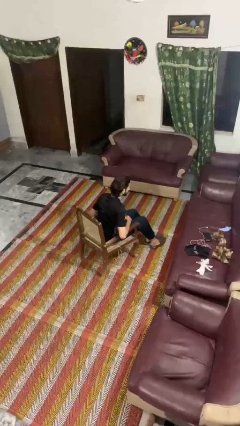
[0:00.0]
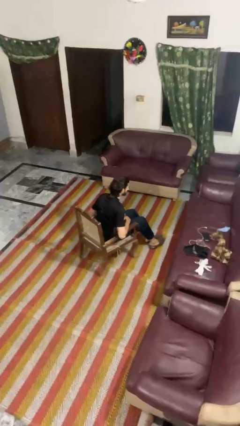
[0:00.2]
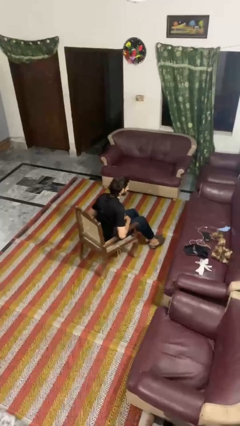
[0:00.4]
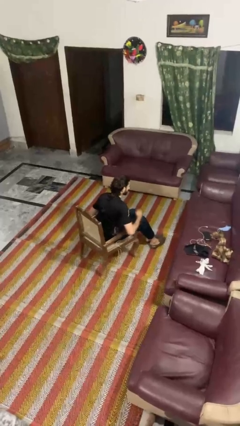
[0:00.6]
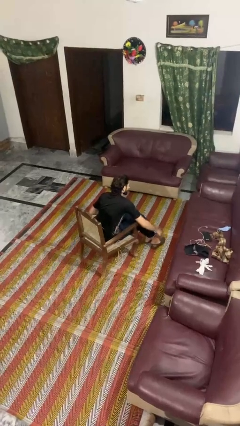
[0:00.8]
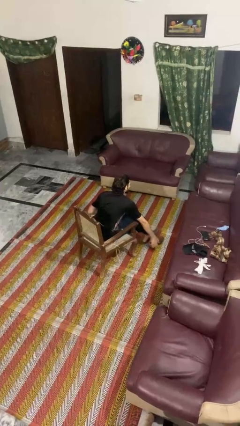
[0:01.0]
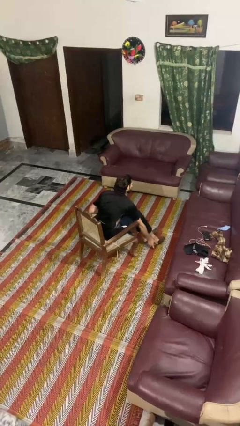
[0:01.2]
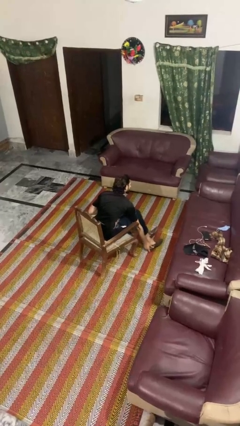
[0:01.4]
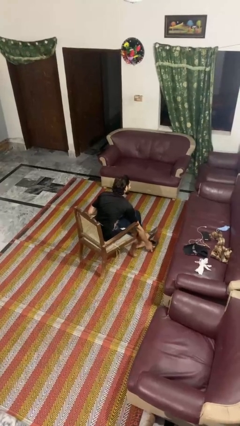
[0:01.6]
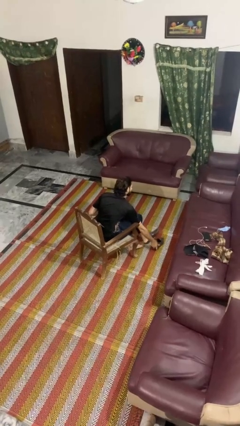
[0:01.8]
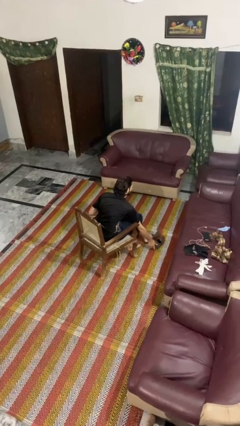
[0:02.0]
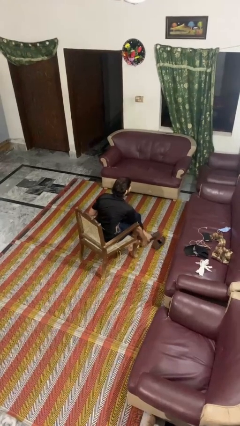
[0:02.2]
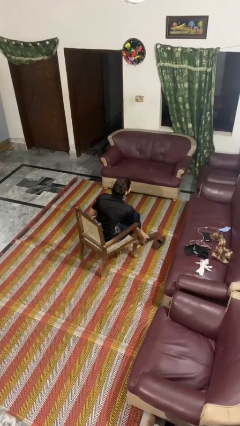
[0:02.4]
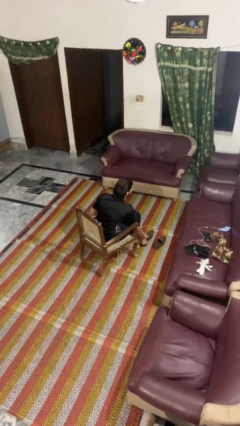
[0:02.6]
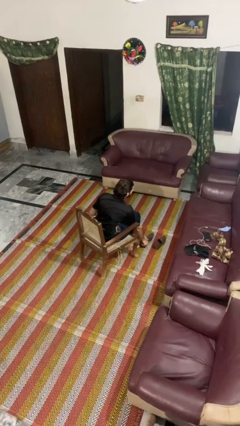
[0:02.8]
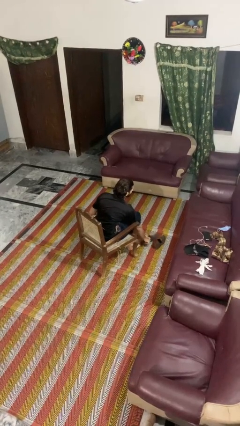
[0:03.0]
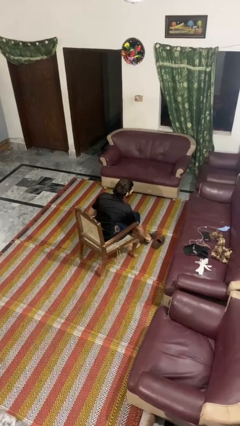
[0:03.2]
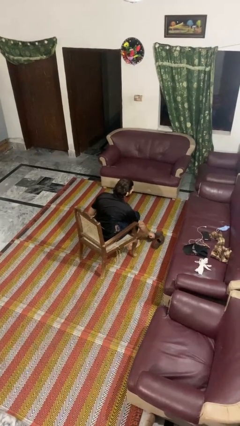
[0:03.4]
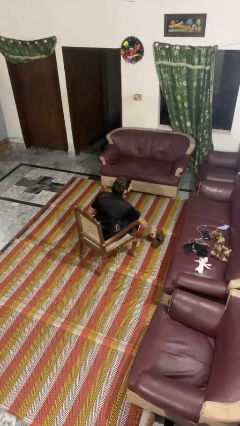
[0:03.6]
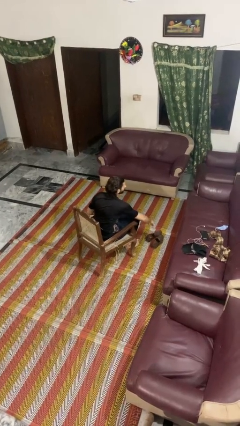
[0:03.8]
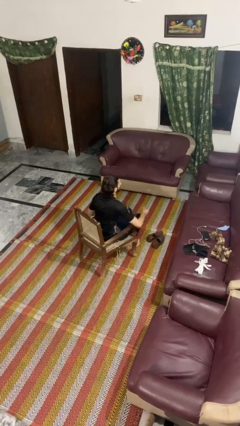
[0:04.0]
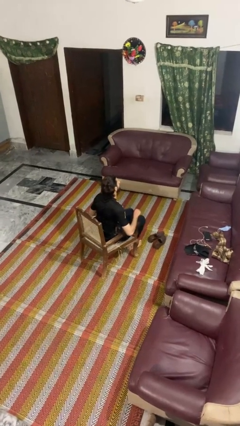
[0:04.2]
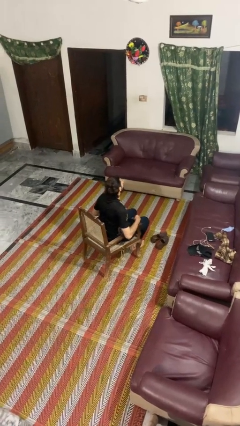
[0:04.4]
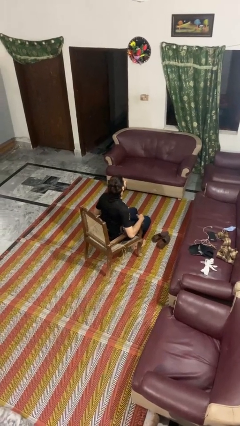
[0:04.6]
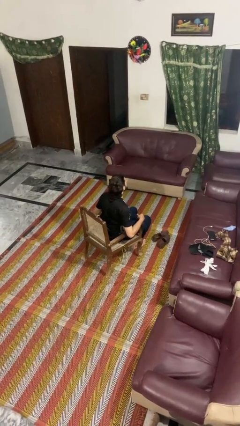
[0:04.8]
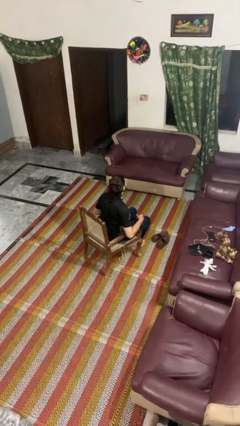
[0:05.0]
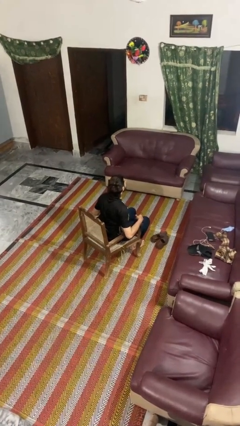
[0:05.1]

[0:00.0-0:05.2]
person takes off shoes

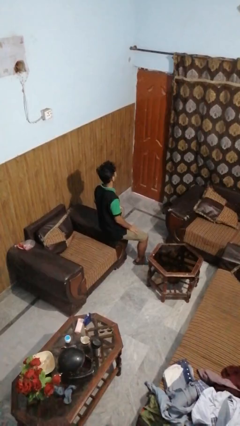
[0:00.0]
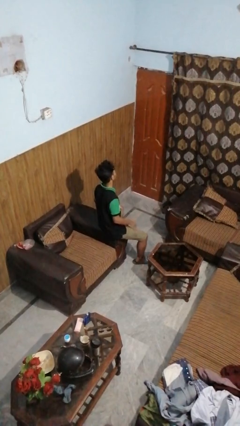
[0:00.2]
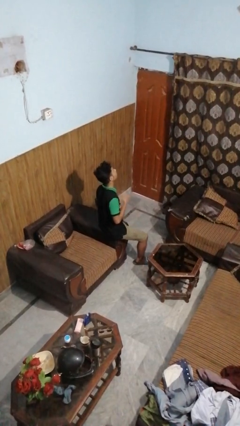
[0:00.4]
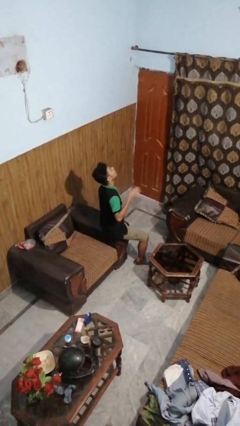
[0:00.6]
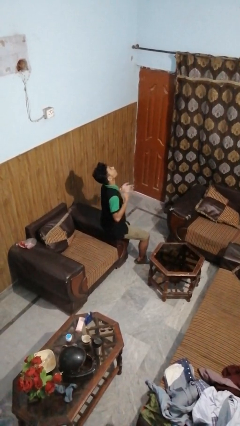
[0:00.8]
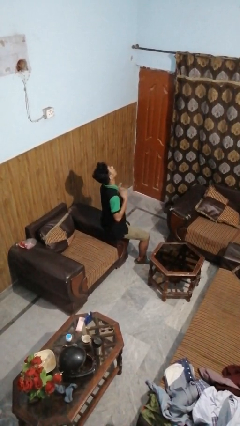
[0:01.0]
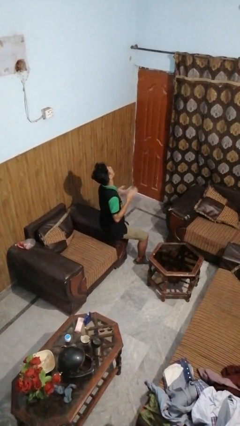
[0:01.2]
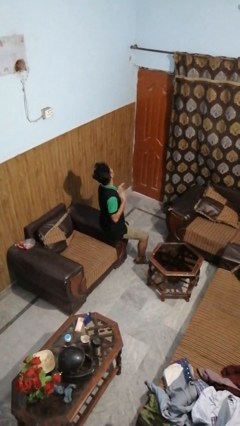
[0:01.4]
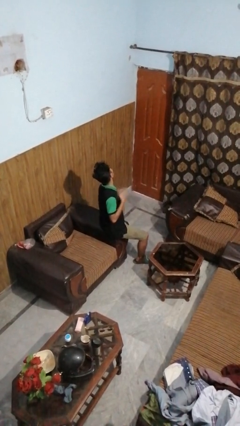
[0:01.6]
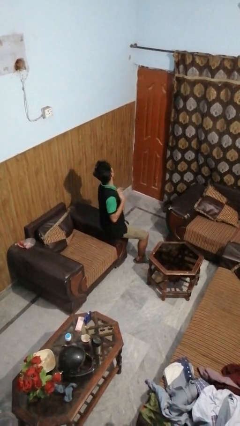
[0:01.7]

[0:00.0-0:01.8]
person drums on chest

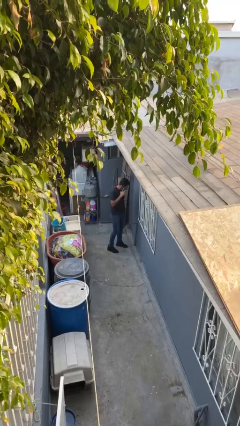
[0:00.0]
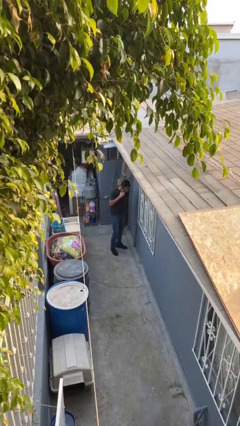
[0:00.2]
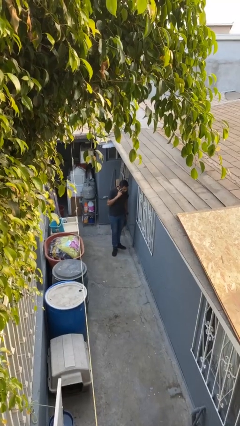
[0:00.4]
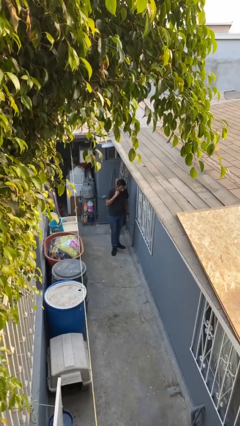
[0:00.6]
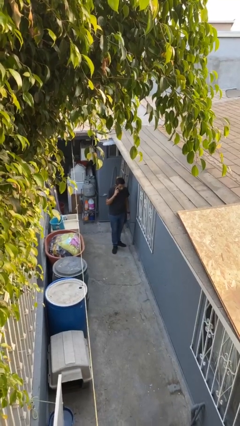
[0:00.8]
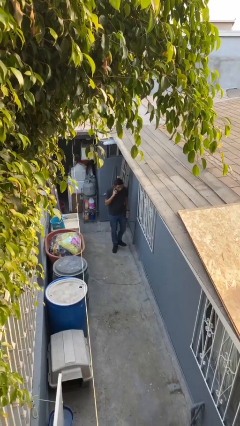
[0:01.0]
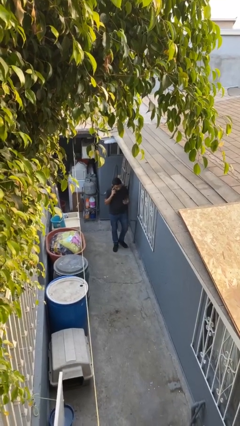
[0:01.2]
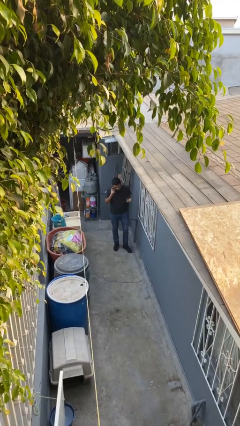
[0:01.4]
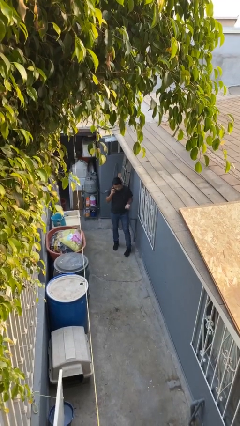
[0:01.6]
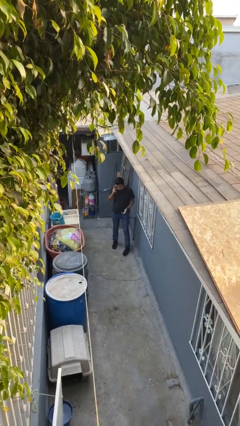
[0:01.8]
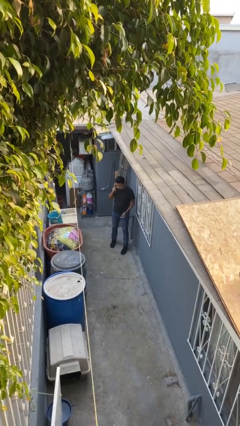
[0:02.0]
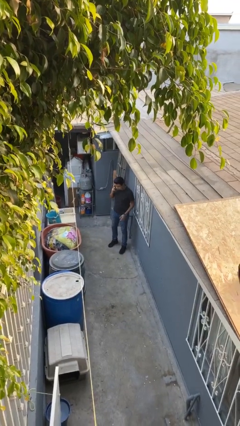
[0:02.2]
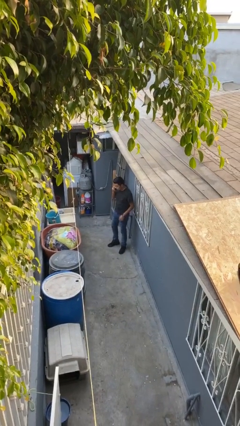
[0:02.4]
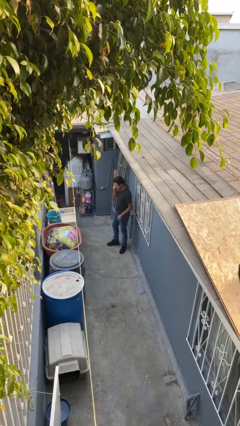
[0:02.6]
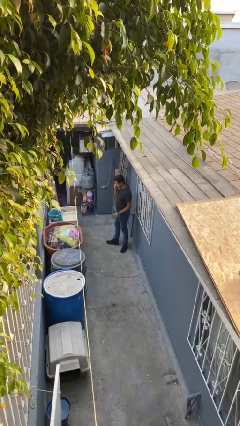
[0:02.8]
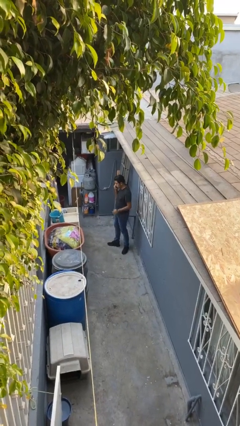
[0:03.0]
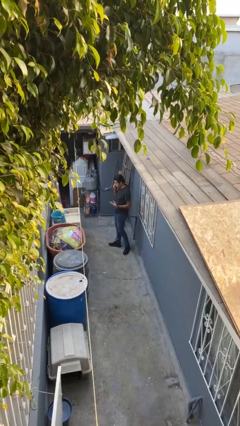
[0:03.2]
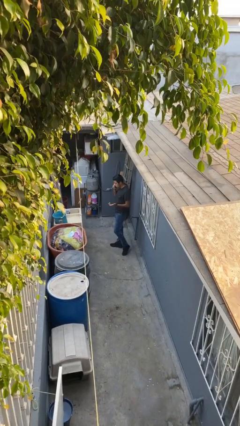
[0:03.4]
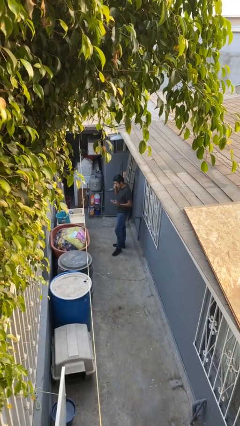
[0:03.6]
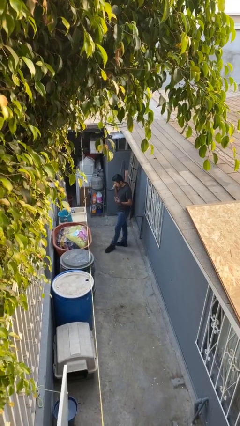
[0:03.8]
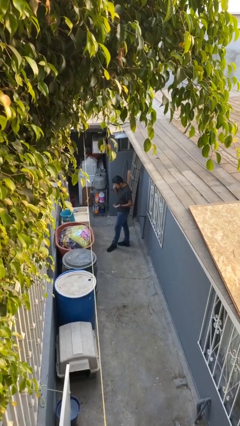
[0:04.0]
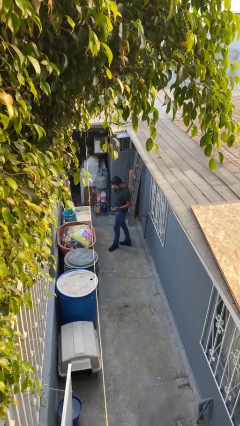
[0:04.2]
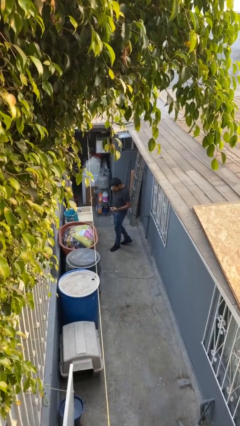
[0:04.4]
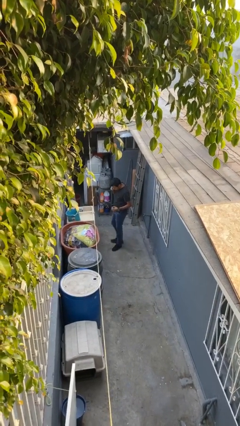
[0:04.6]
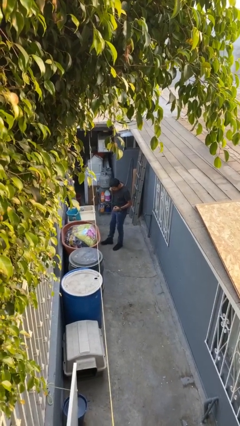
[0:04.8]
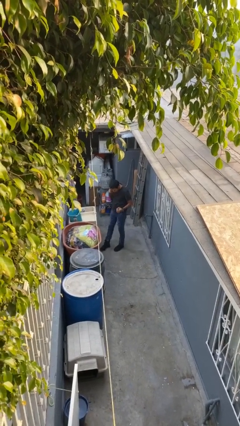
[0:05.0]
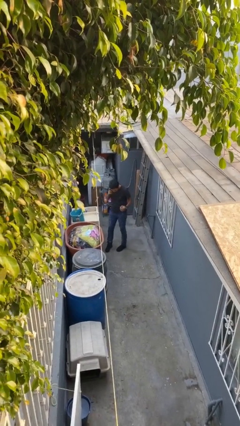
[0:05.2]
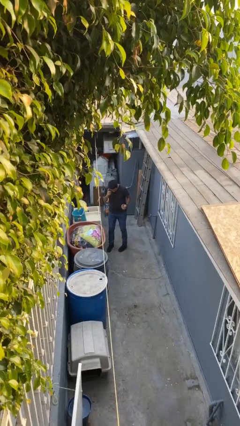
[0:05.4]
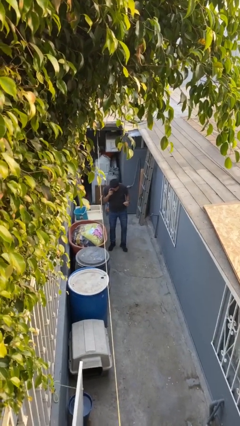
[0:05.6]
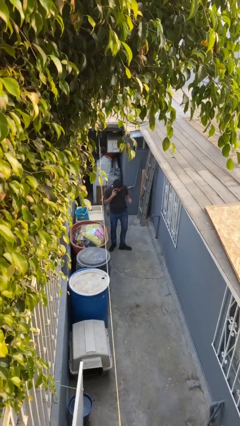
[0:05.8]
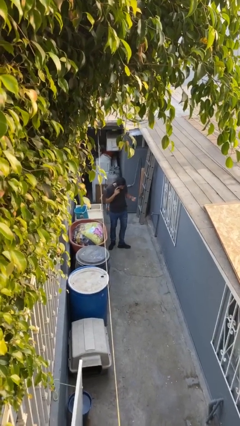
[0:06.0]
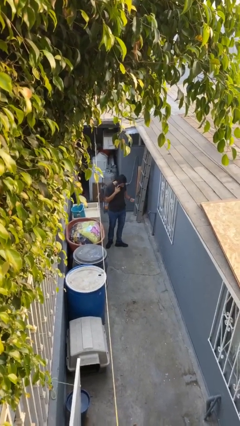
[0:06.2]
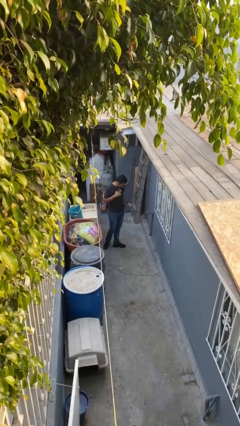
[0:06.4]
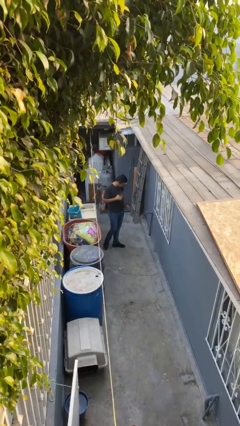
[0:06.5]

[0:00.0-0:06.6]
person talks on phone

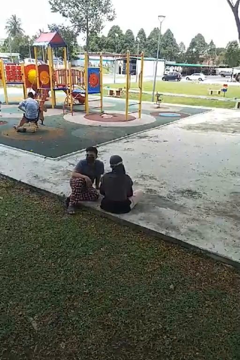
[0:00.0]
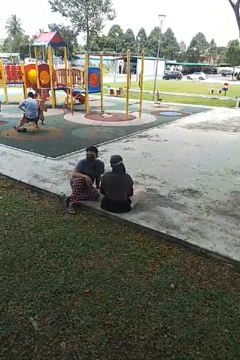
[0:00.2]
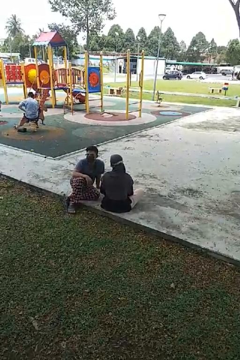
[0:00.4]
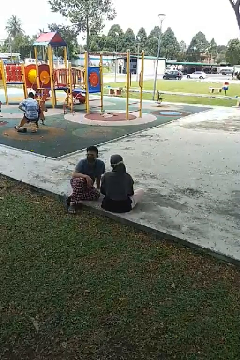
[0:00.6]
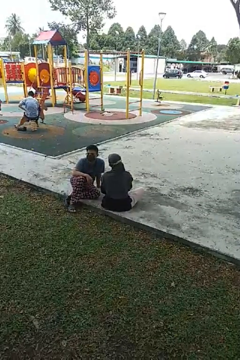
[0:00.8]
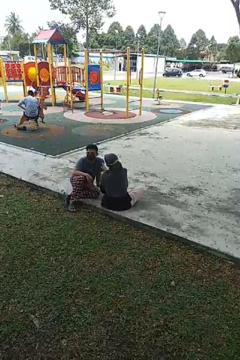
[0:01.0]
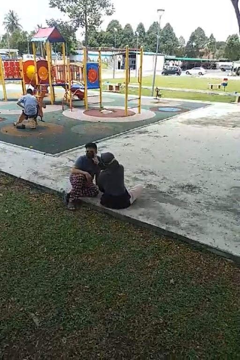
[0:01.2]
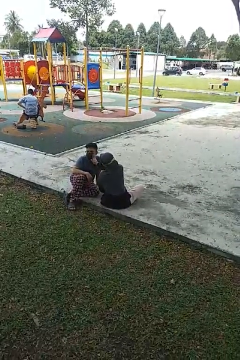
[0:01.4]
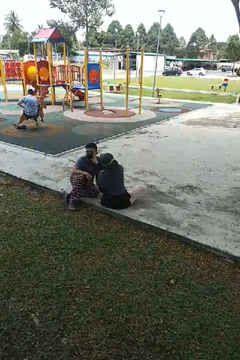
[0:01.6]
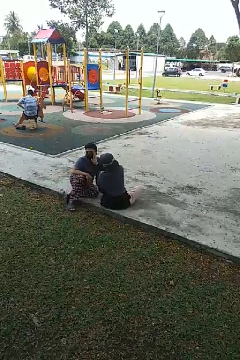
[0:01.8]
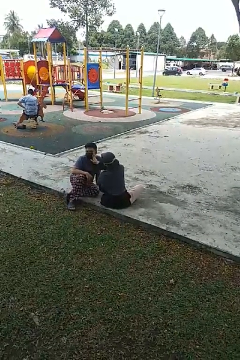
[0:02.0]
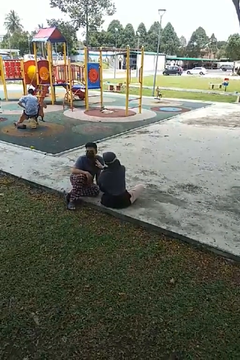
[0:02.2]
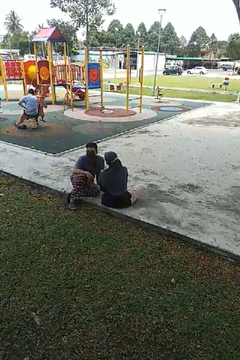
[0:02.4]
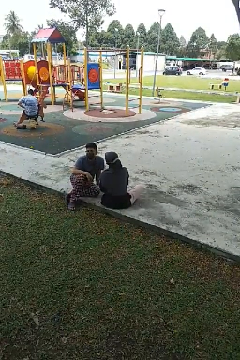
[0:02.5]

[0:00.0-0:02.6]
person touches face of person

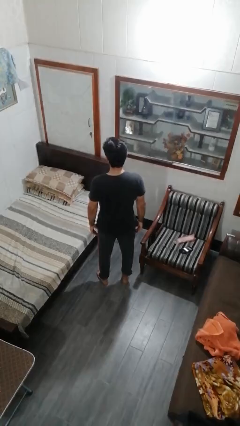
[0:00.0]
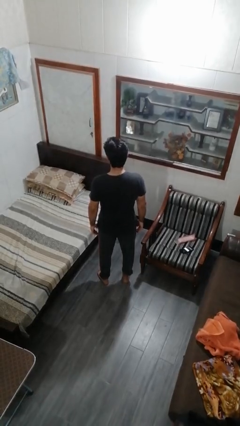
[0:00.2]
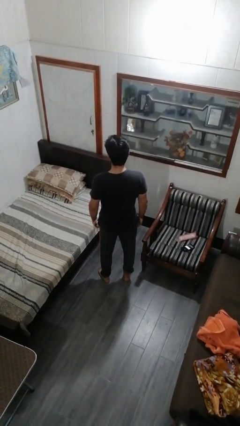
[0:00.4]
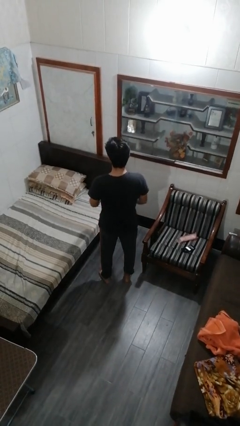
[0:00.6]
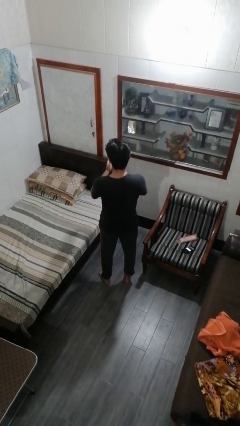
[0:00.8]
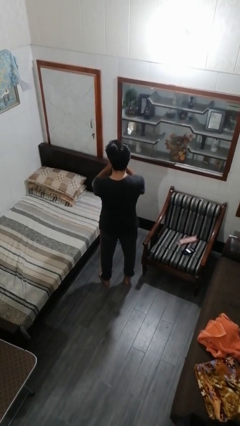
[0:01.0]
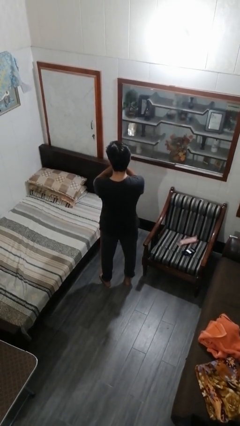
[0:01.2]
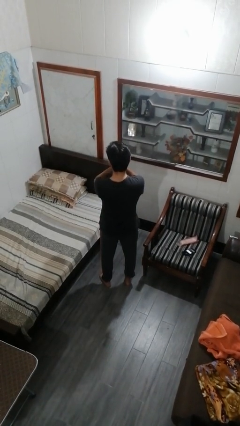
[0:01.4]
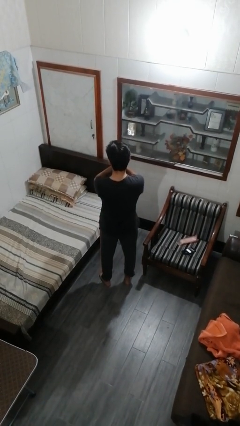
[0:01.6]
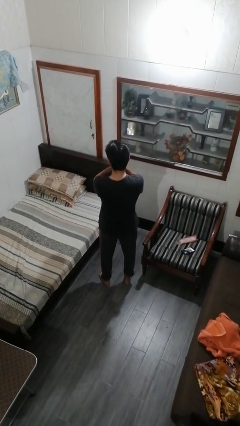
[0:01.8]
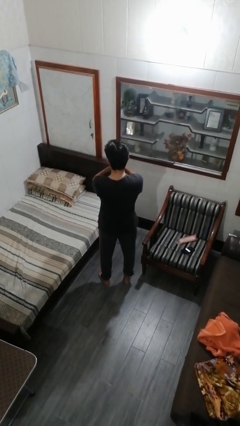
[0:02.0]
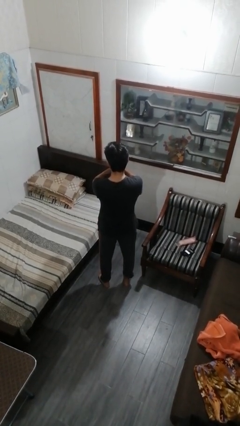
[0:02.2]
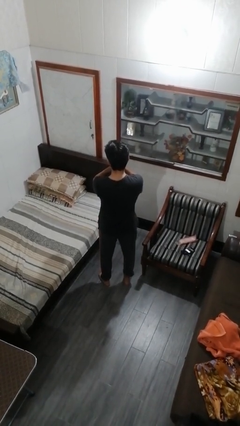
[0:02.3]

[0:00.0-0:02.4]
person covers face with hands
